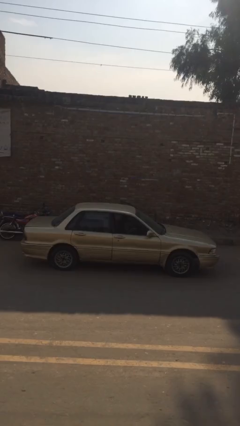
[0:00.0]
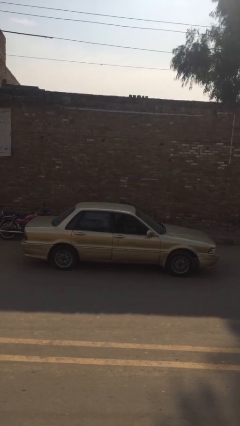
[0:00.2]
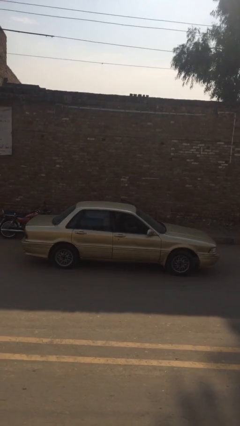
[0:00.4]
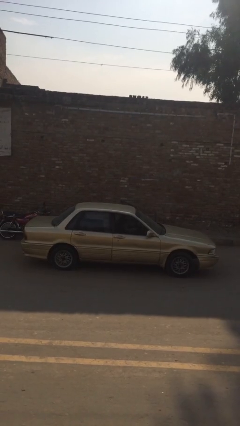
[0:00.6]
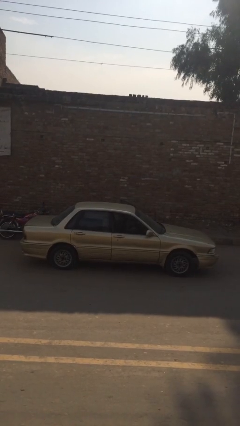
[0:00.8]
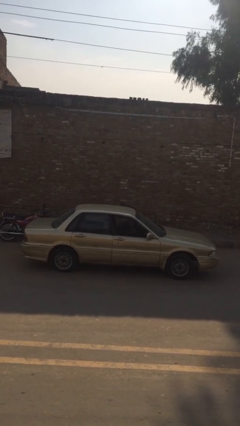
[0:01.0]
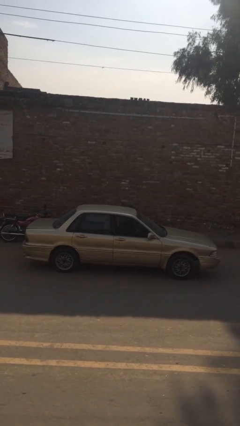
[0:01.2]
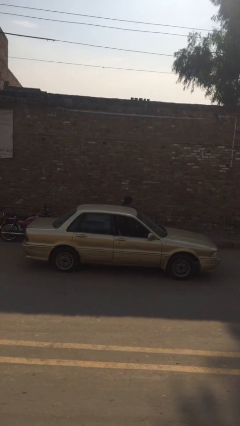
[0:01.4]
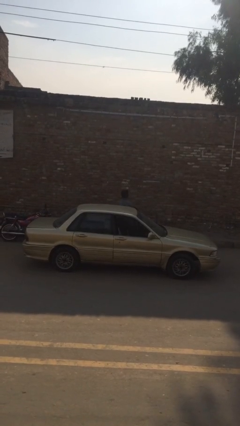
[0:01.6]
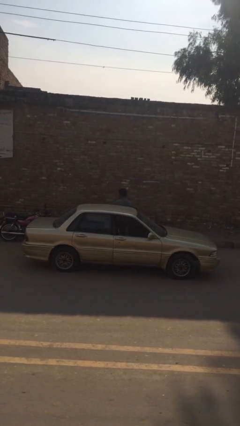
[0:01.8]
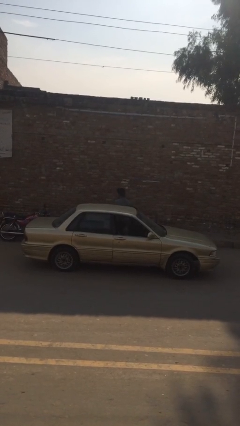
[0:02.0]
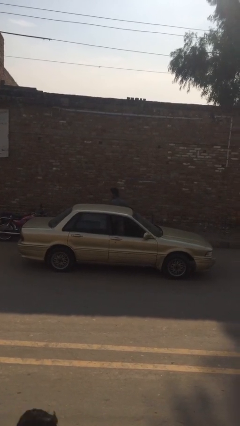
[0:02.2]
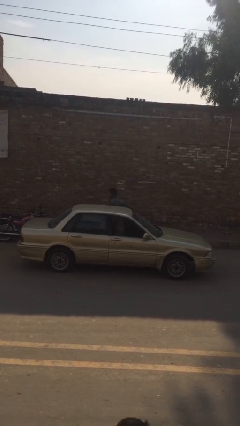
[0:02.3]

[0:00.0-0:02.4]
person exits car

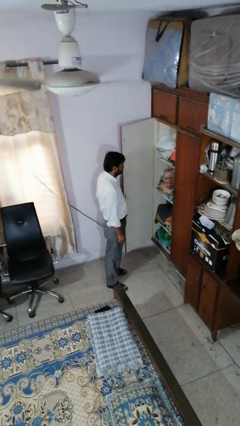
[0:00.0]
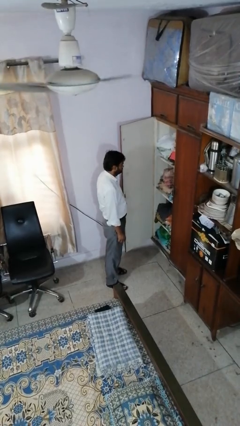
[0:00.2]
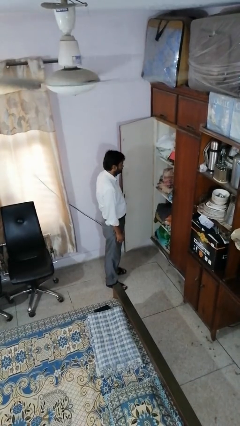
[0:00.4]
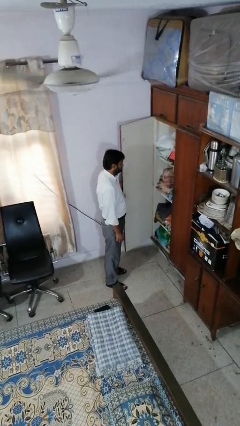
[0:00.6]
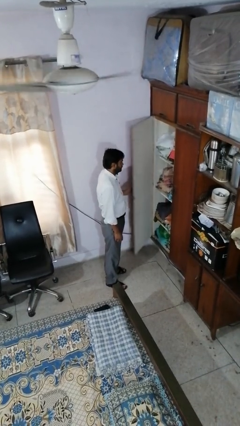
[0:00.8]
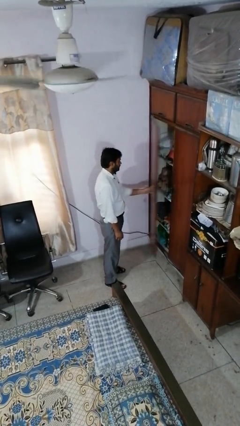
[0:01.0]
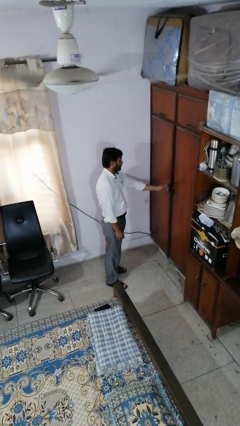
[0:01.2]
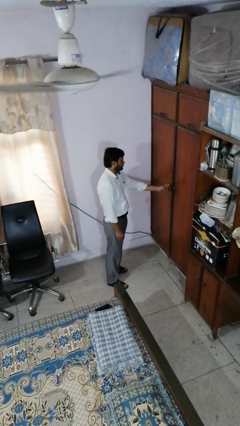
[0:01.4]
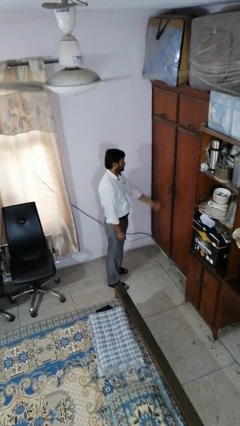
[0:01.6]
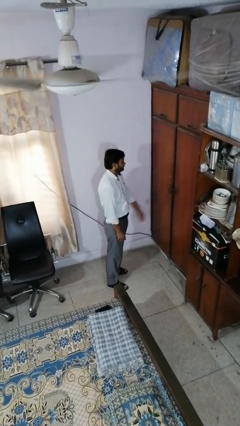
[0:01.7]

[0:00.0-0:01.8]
person closes closet door

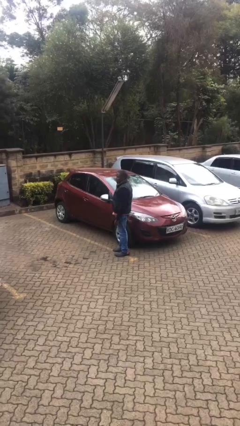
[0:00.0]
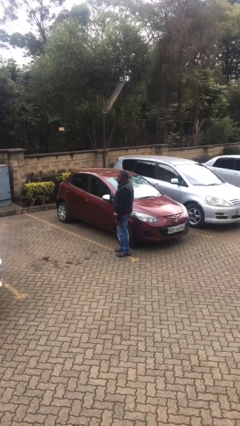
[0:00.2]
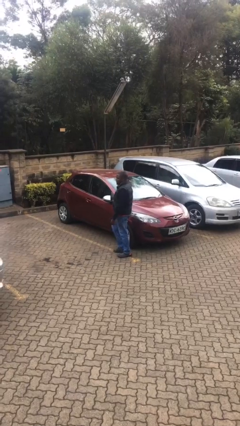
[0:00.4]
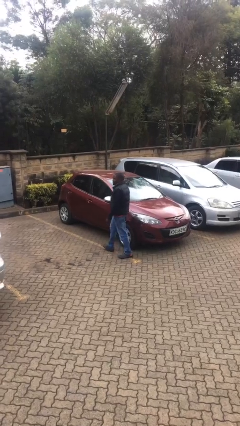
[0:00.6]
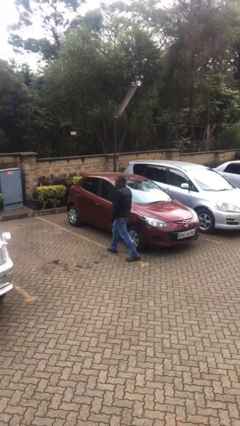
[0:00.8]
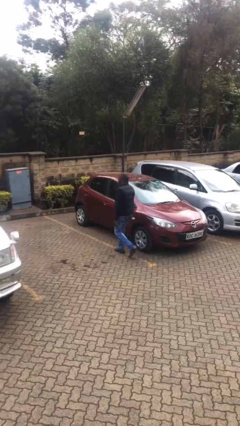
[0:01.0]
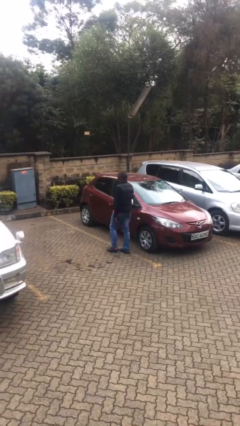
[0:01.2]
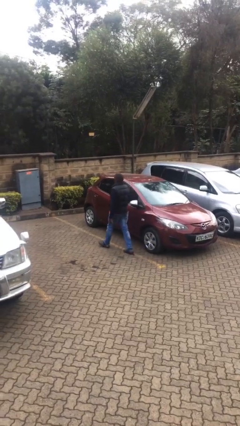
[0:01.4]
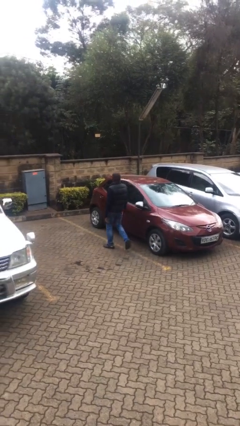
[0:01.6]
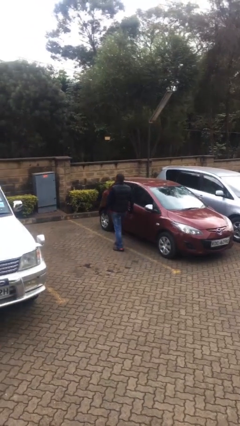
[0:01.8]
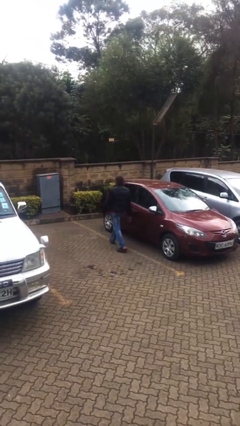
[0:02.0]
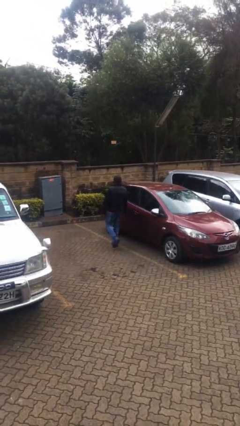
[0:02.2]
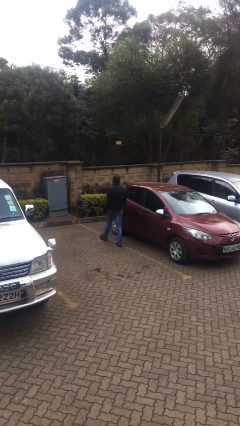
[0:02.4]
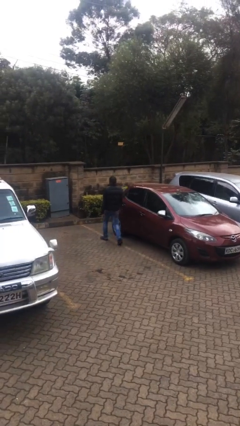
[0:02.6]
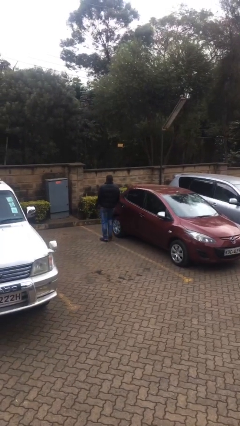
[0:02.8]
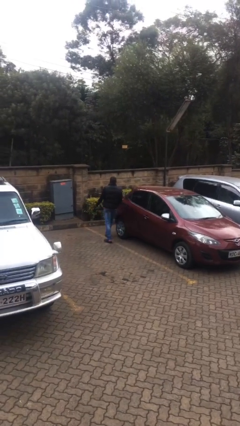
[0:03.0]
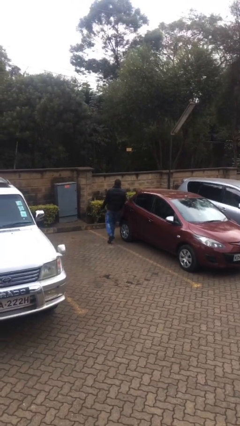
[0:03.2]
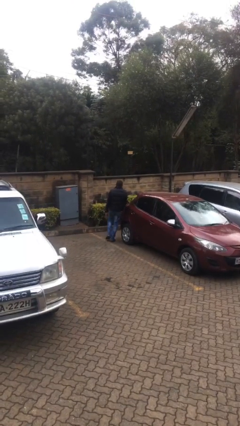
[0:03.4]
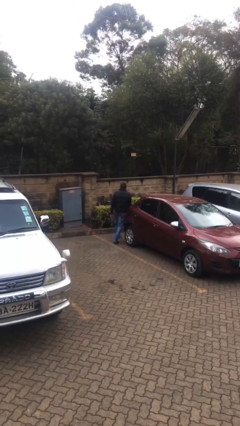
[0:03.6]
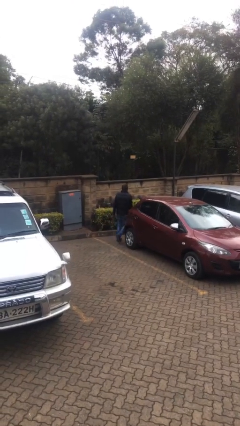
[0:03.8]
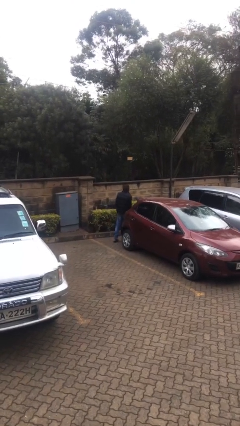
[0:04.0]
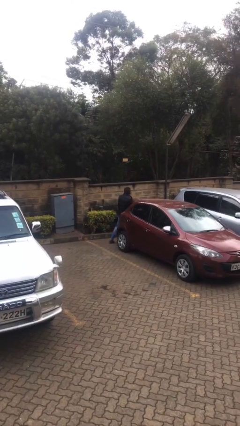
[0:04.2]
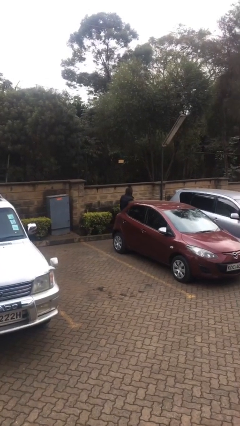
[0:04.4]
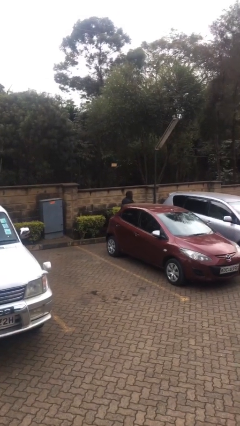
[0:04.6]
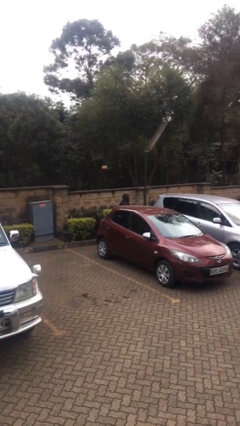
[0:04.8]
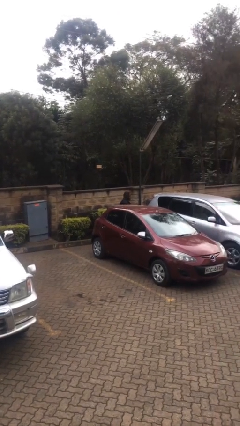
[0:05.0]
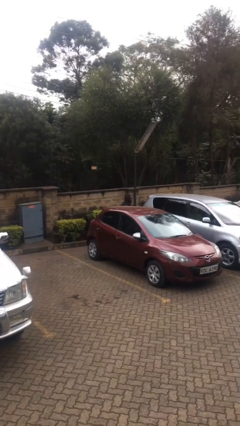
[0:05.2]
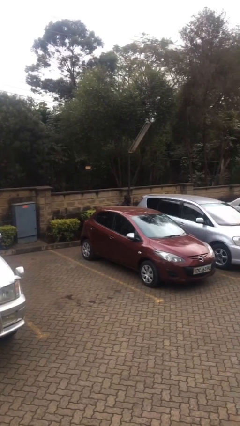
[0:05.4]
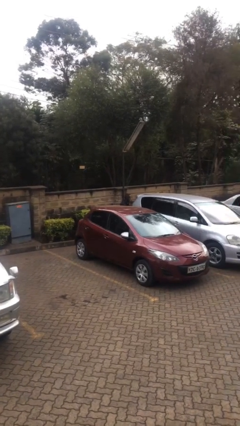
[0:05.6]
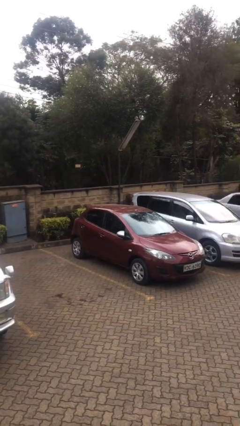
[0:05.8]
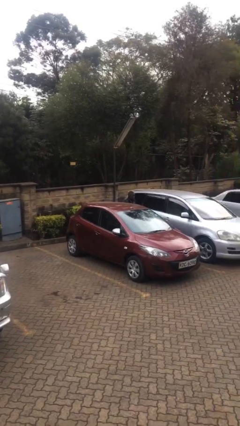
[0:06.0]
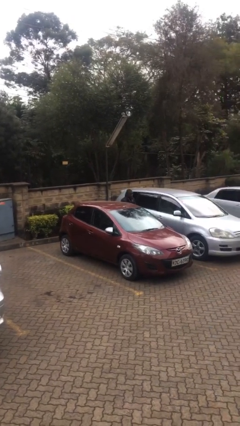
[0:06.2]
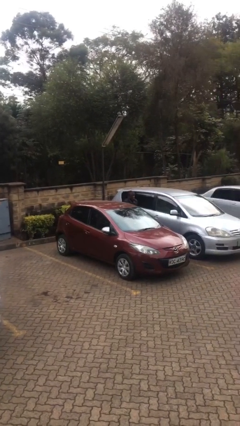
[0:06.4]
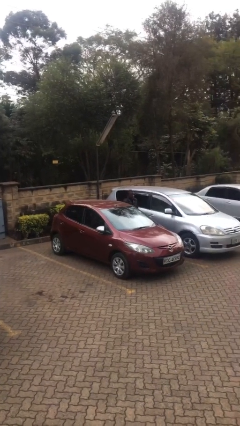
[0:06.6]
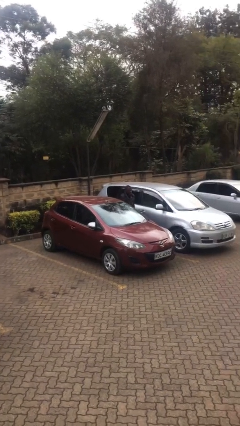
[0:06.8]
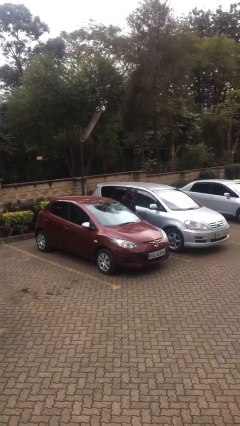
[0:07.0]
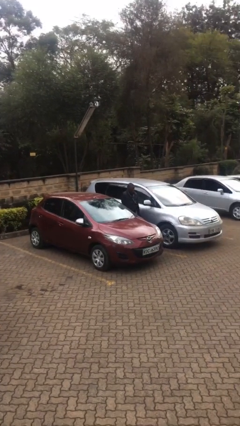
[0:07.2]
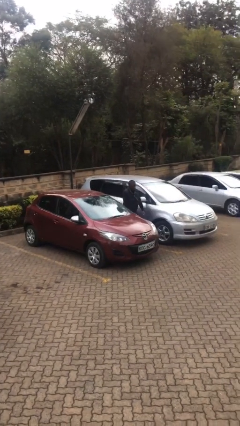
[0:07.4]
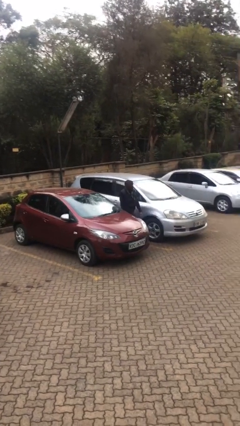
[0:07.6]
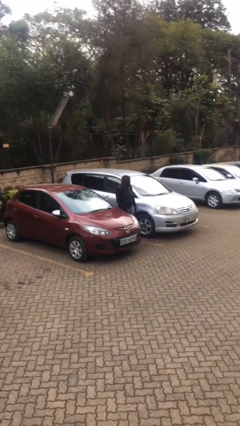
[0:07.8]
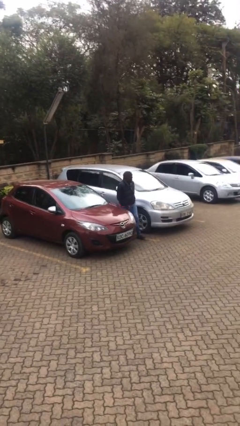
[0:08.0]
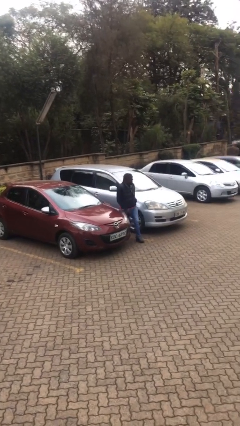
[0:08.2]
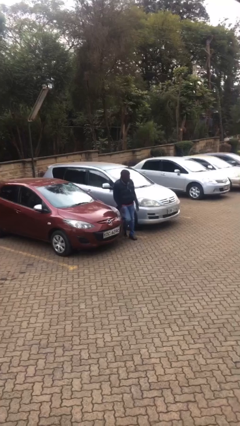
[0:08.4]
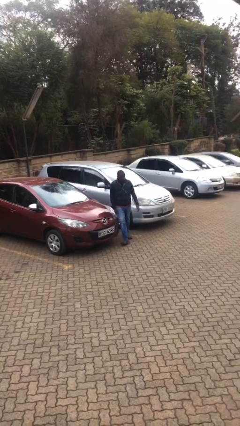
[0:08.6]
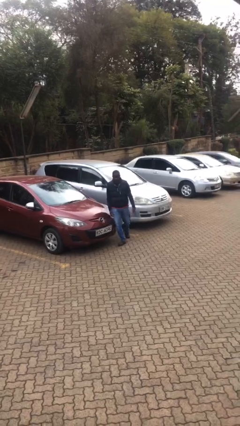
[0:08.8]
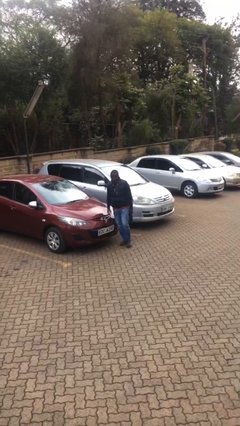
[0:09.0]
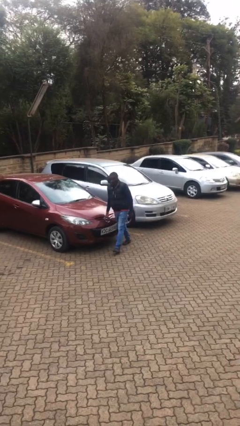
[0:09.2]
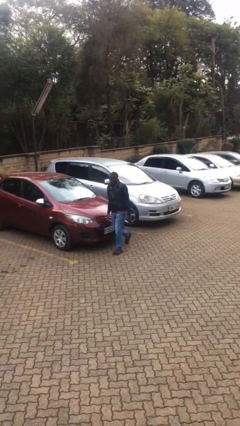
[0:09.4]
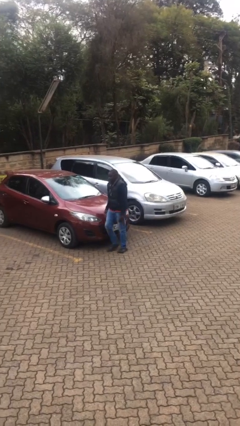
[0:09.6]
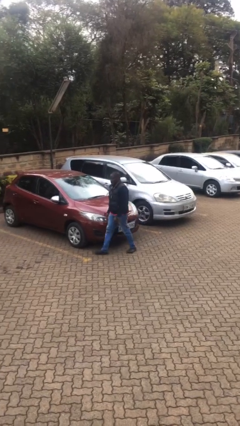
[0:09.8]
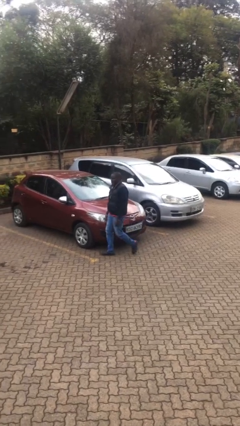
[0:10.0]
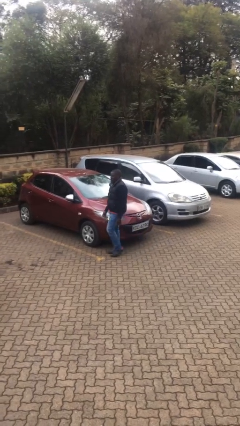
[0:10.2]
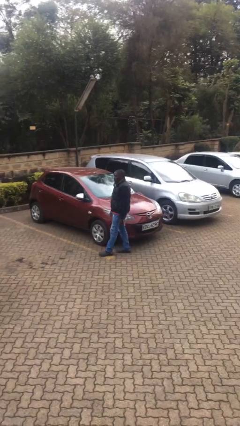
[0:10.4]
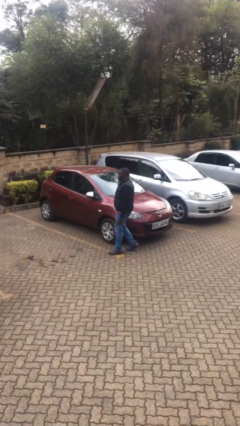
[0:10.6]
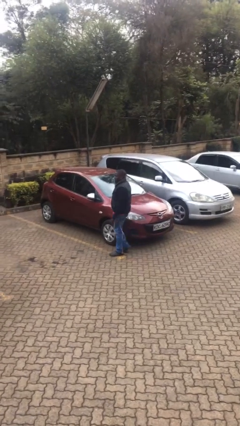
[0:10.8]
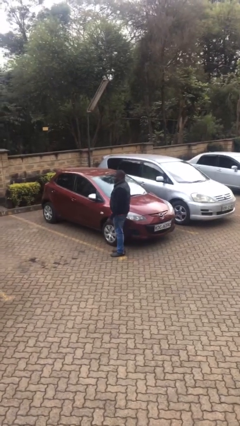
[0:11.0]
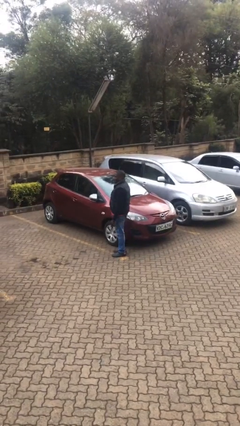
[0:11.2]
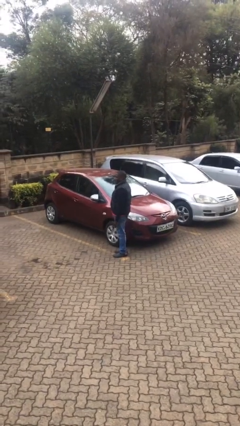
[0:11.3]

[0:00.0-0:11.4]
person walks around car

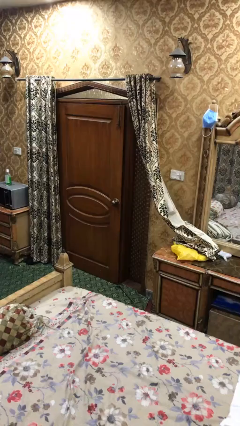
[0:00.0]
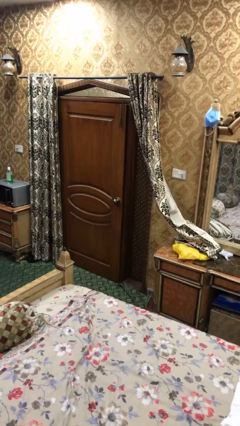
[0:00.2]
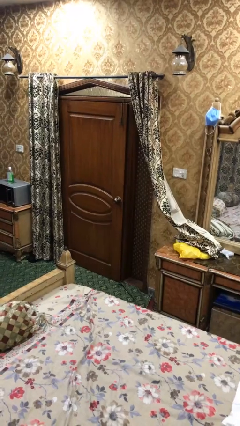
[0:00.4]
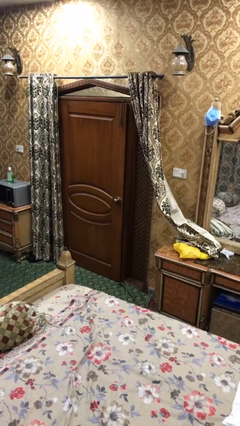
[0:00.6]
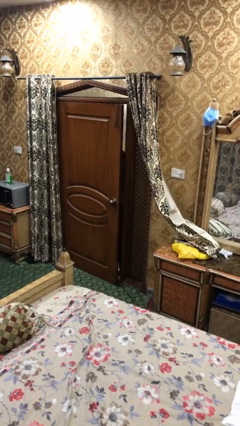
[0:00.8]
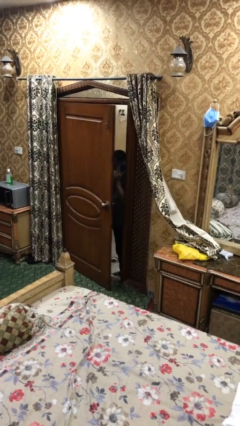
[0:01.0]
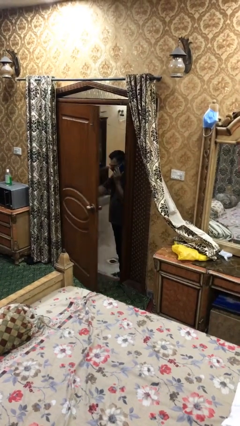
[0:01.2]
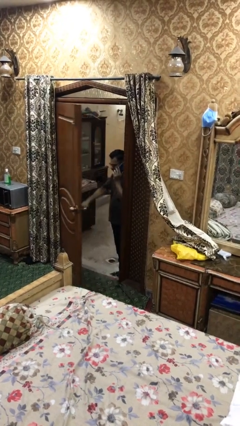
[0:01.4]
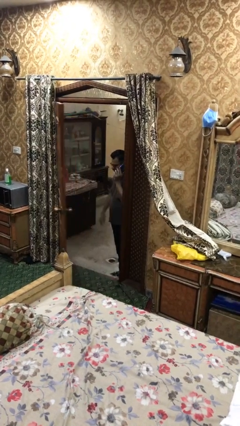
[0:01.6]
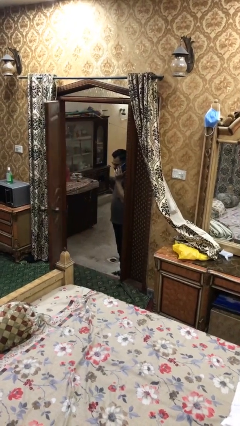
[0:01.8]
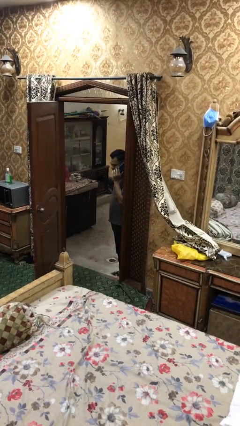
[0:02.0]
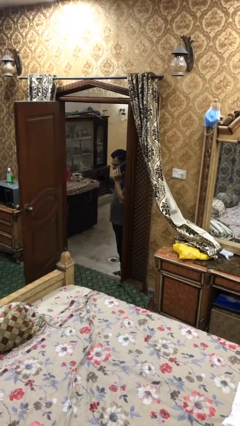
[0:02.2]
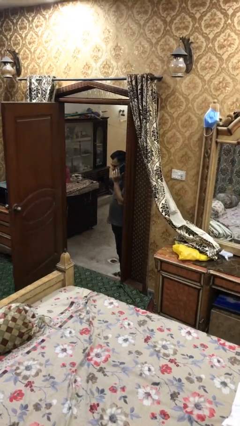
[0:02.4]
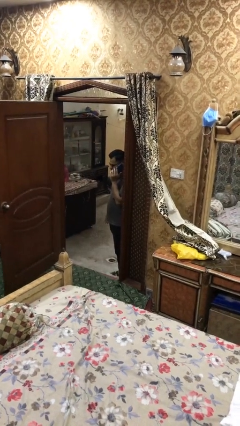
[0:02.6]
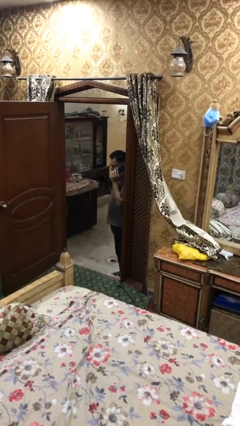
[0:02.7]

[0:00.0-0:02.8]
person opens facility door
